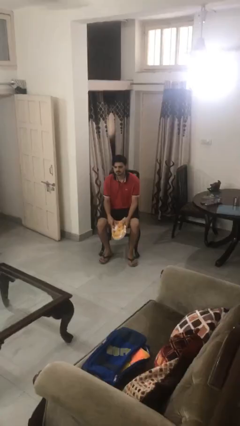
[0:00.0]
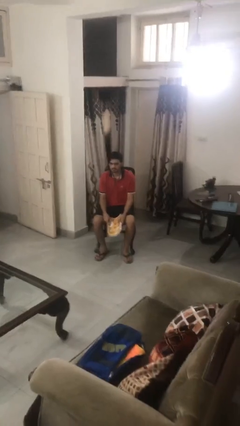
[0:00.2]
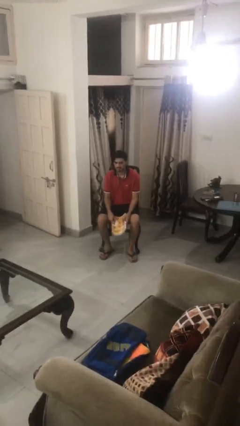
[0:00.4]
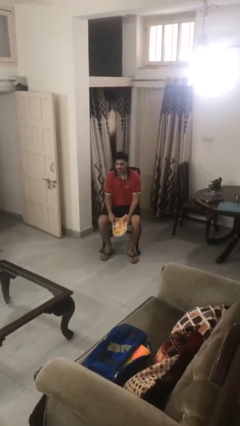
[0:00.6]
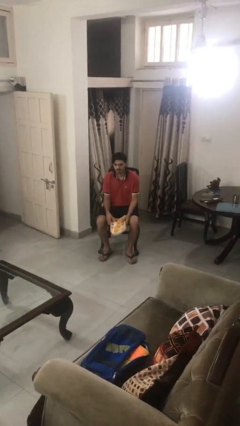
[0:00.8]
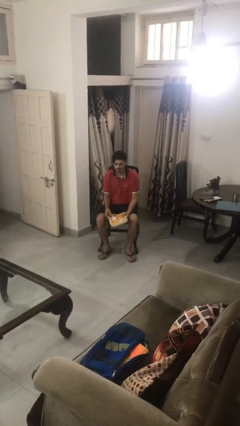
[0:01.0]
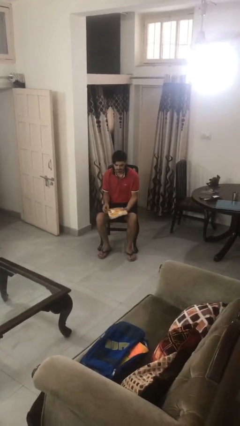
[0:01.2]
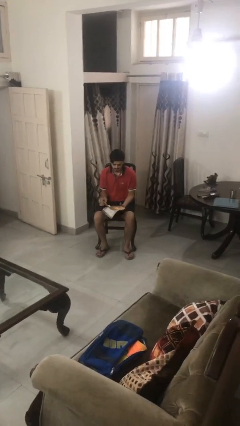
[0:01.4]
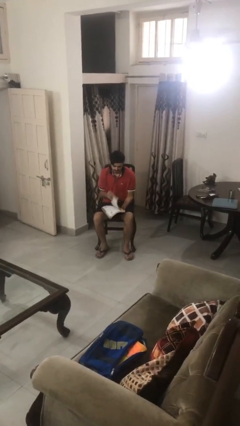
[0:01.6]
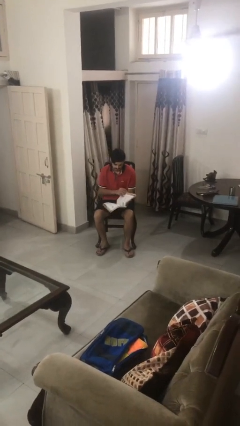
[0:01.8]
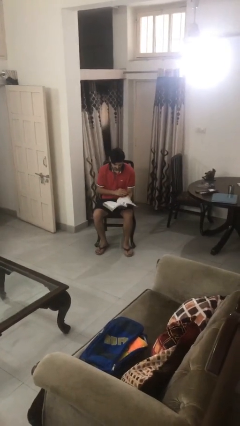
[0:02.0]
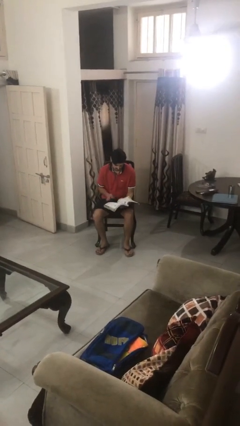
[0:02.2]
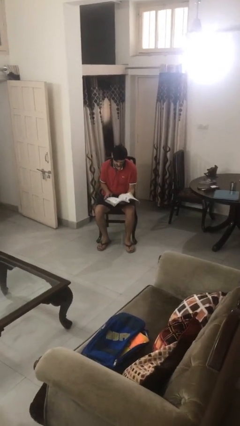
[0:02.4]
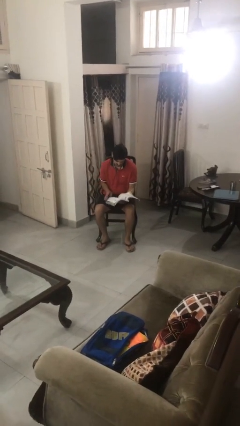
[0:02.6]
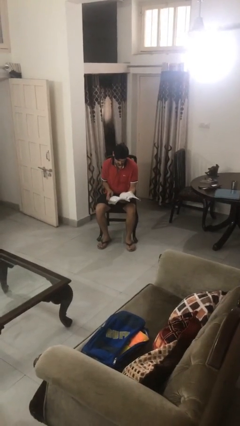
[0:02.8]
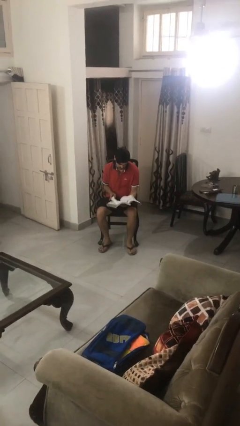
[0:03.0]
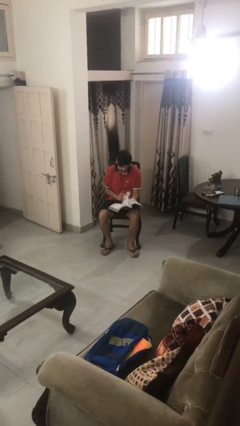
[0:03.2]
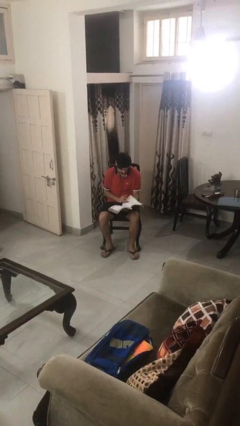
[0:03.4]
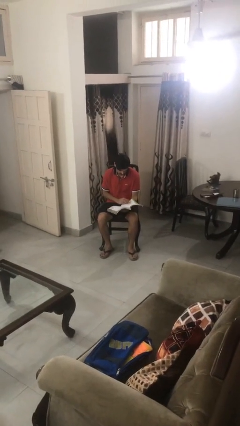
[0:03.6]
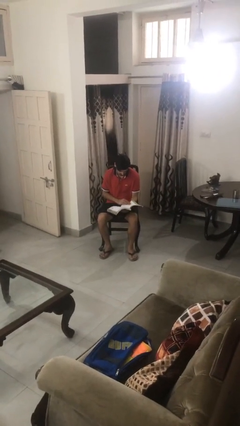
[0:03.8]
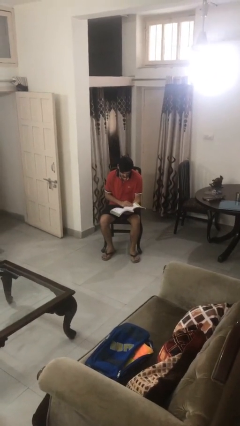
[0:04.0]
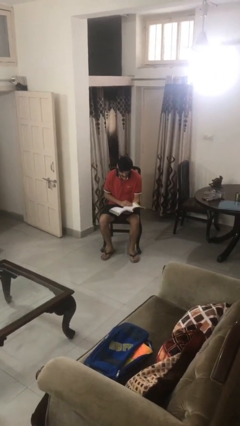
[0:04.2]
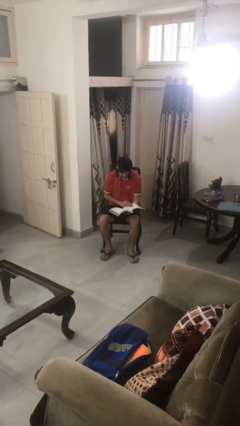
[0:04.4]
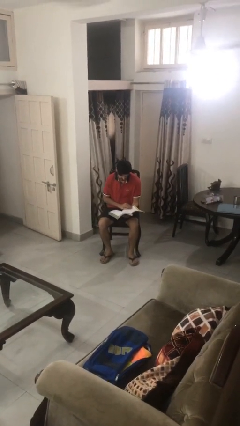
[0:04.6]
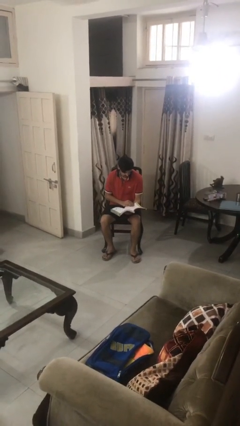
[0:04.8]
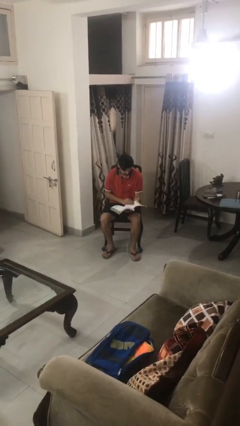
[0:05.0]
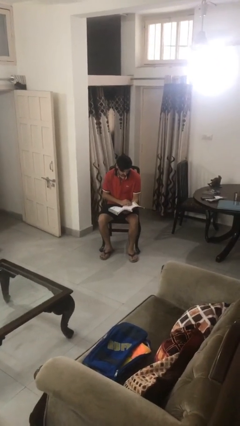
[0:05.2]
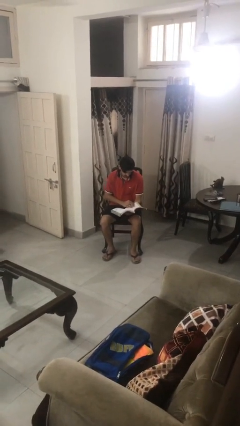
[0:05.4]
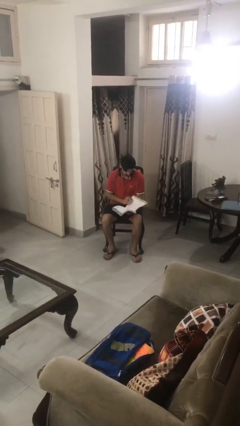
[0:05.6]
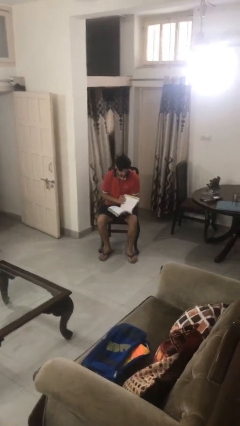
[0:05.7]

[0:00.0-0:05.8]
person reads book

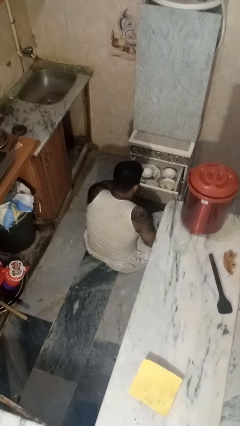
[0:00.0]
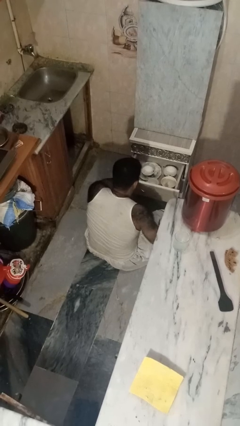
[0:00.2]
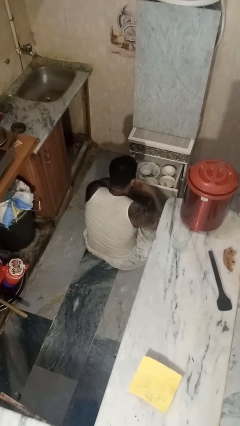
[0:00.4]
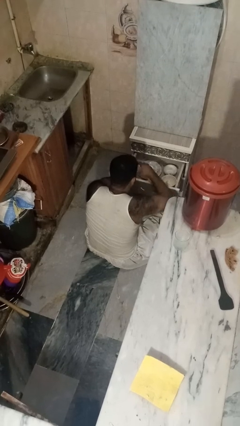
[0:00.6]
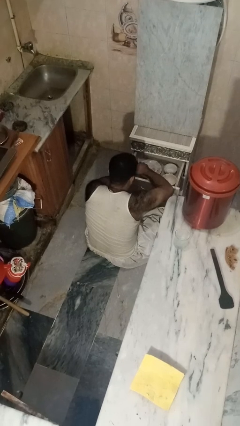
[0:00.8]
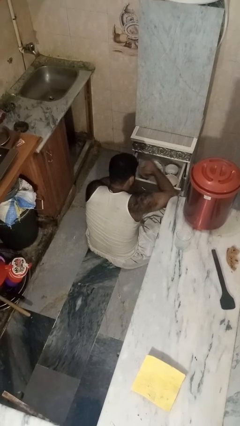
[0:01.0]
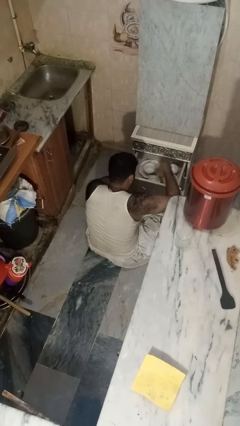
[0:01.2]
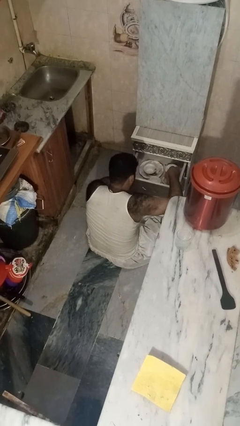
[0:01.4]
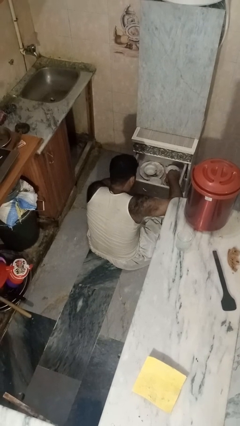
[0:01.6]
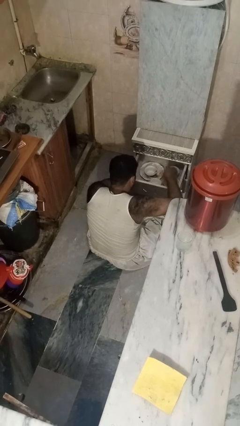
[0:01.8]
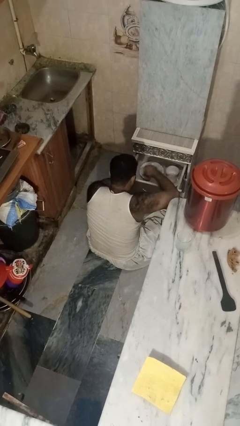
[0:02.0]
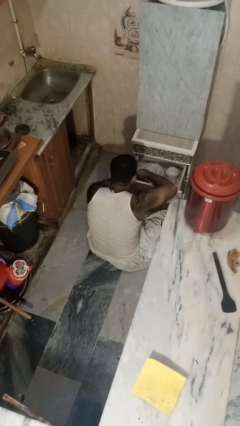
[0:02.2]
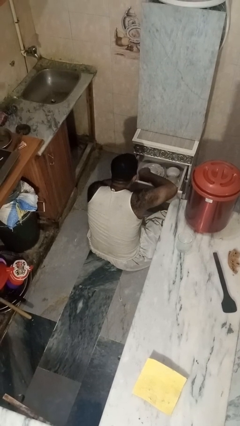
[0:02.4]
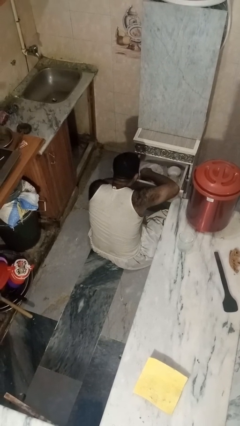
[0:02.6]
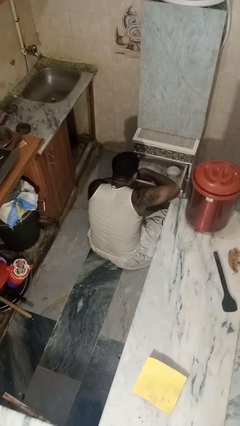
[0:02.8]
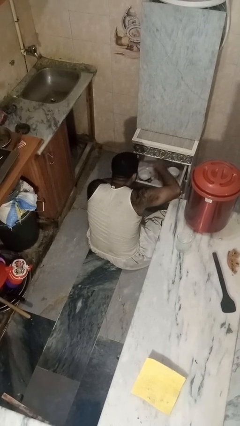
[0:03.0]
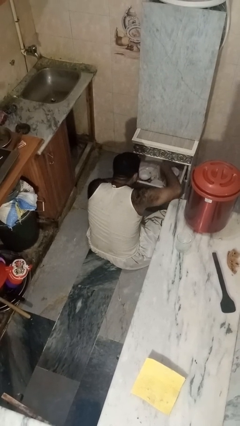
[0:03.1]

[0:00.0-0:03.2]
person searches in kitchen drawer

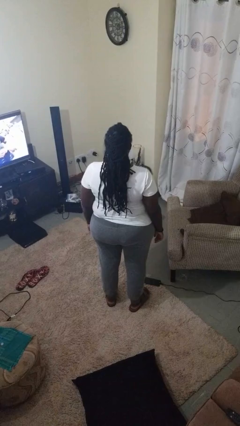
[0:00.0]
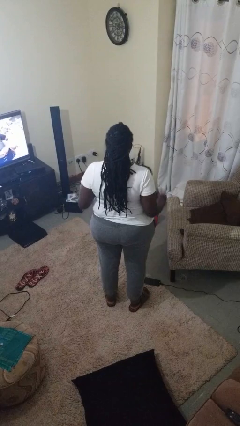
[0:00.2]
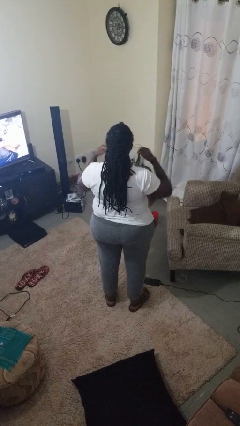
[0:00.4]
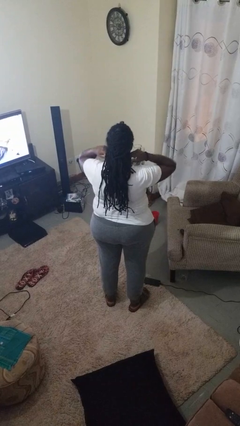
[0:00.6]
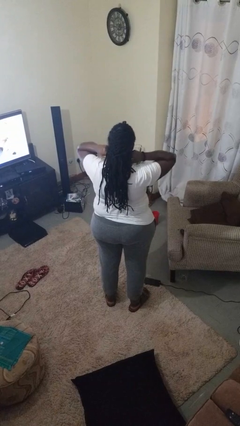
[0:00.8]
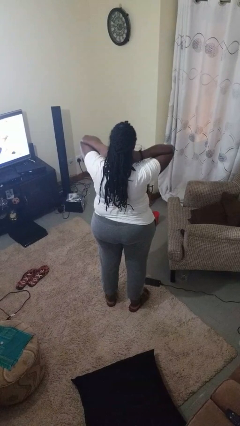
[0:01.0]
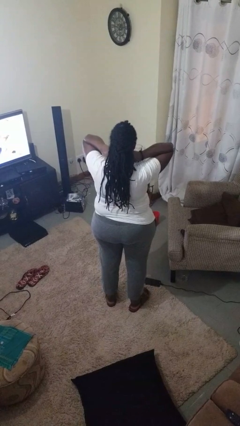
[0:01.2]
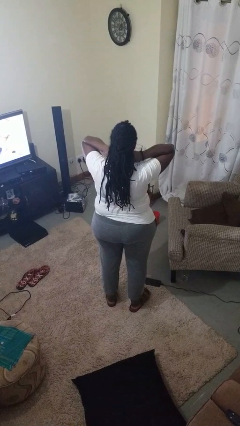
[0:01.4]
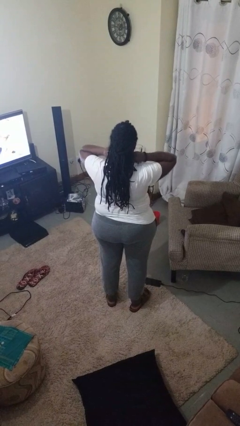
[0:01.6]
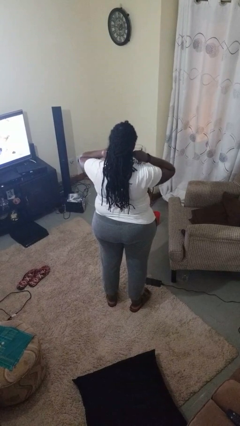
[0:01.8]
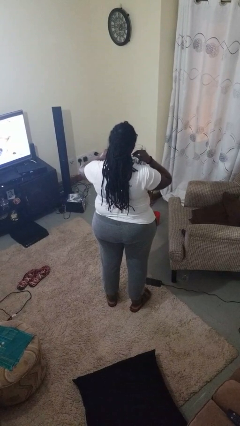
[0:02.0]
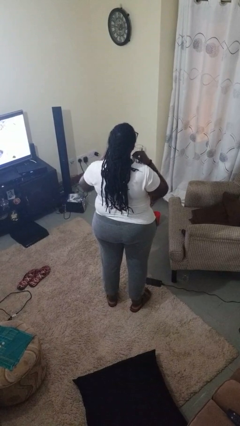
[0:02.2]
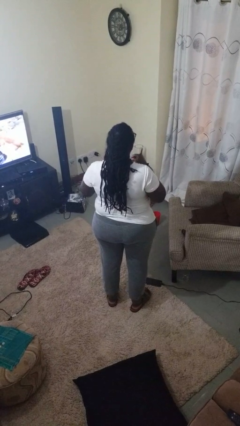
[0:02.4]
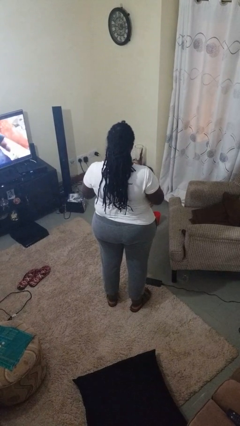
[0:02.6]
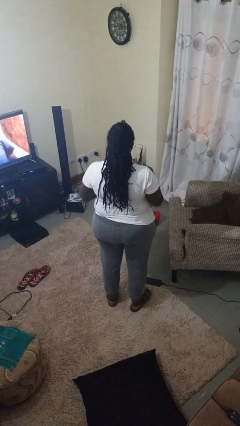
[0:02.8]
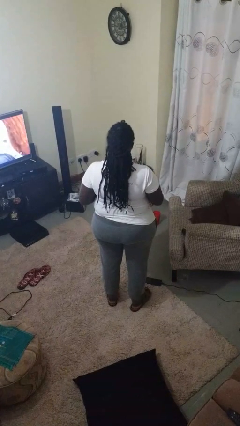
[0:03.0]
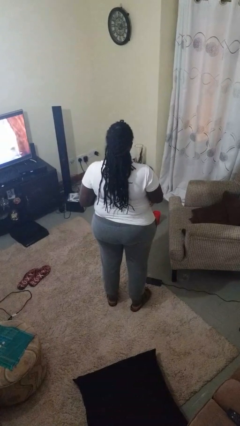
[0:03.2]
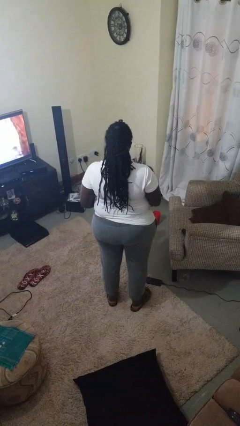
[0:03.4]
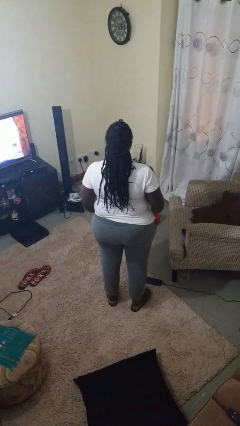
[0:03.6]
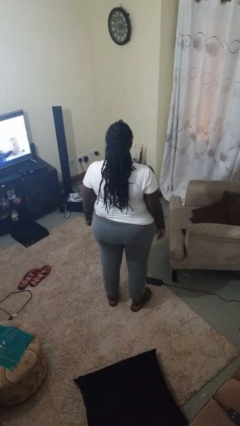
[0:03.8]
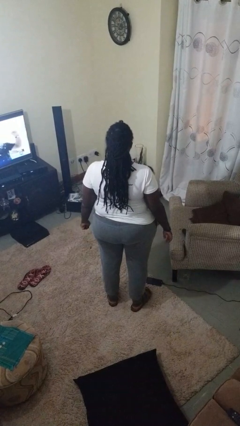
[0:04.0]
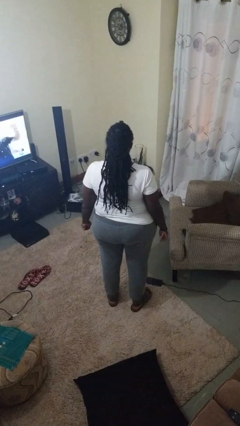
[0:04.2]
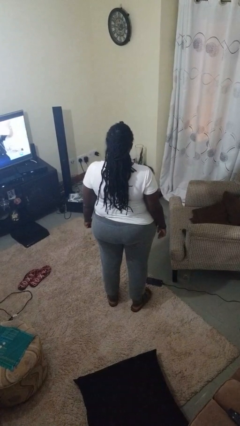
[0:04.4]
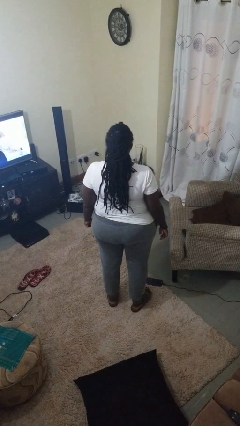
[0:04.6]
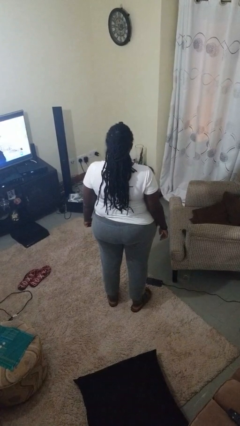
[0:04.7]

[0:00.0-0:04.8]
person takes off necklace

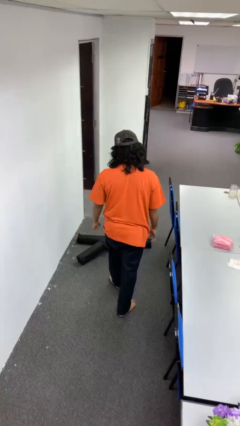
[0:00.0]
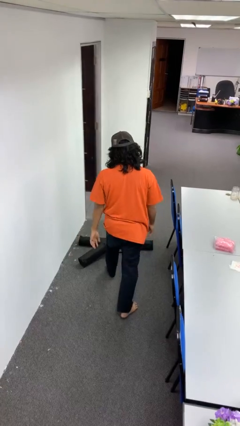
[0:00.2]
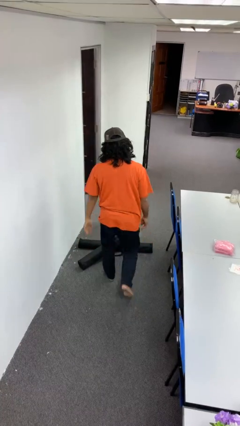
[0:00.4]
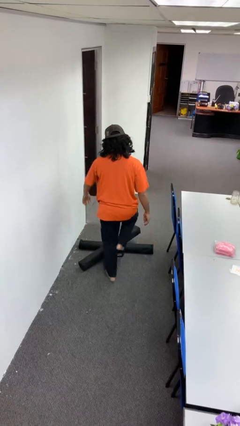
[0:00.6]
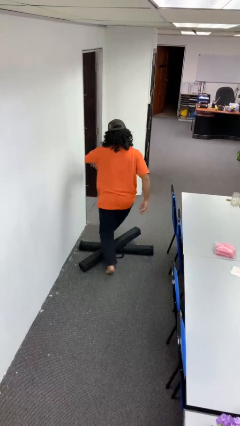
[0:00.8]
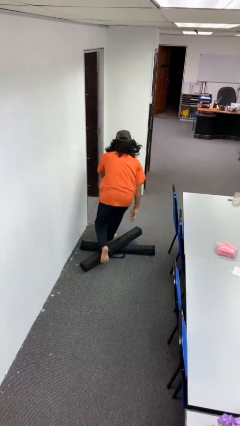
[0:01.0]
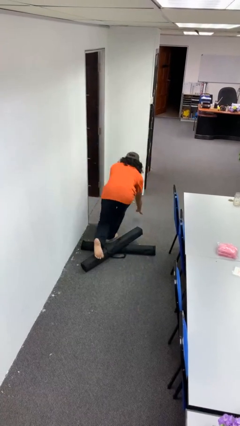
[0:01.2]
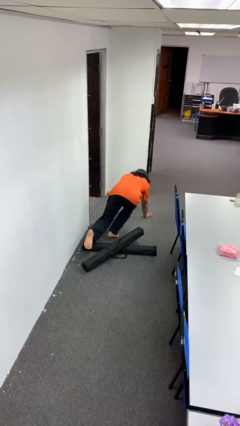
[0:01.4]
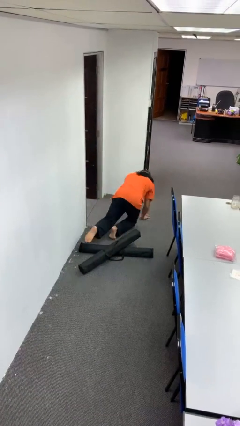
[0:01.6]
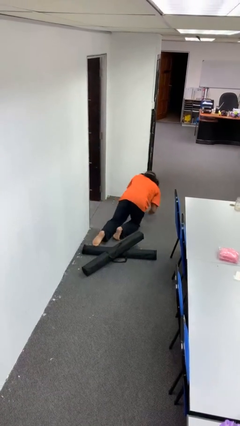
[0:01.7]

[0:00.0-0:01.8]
person trips on object on floor

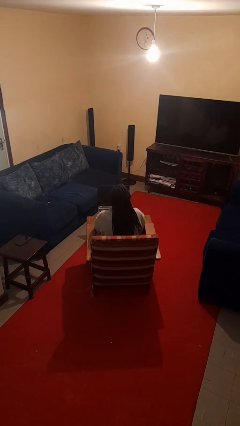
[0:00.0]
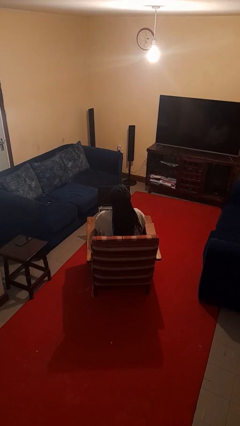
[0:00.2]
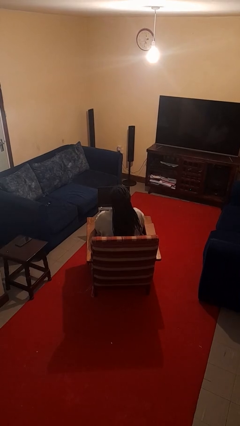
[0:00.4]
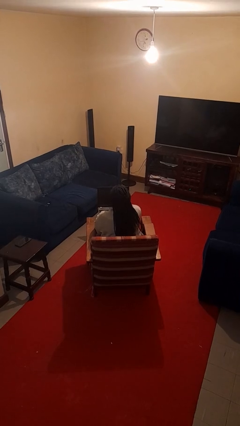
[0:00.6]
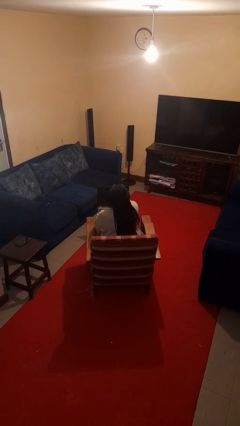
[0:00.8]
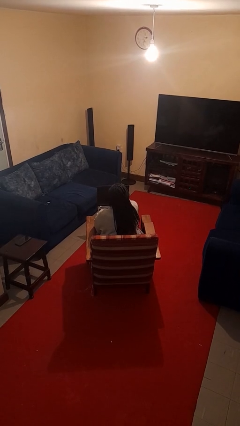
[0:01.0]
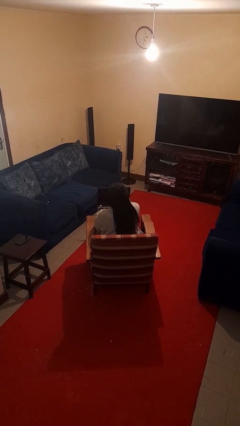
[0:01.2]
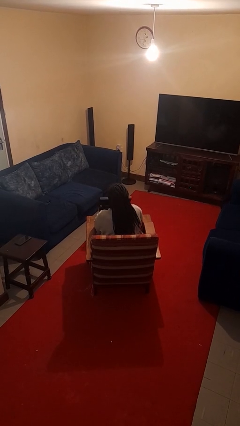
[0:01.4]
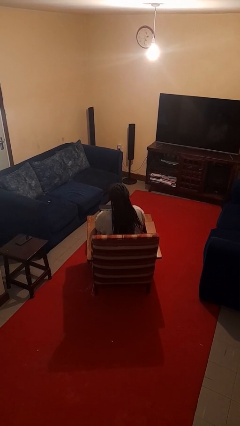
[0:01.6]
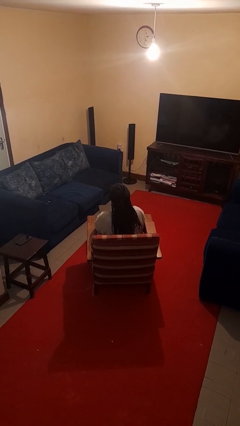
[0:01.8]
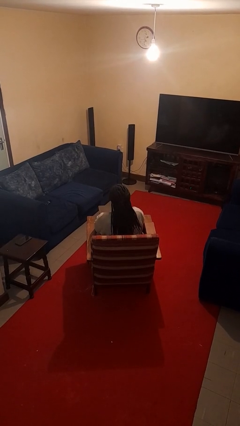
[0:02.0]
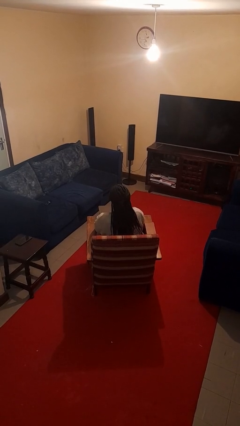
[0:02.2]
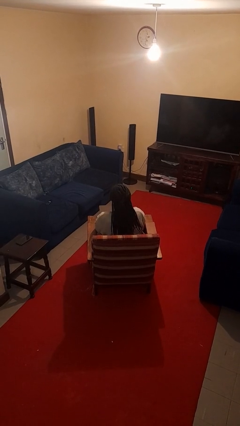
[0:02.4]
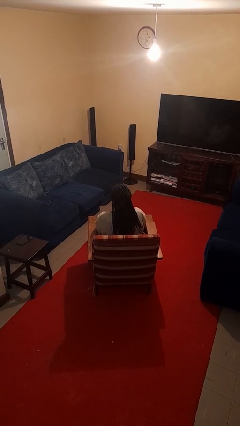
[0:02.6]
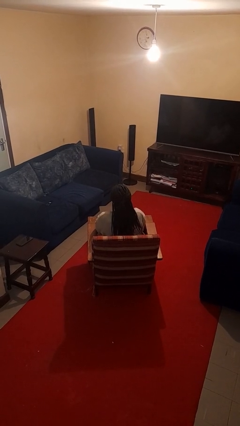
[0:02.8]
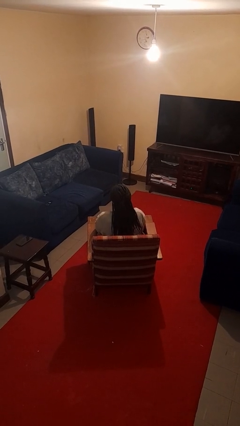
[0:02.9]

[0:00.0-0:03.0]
person closes laptop
